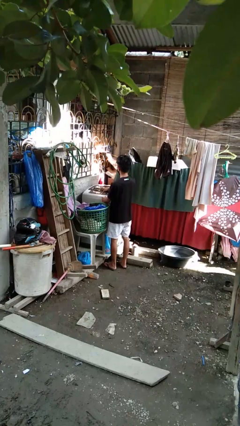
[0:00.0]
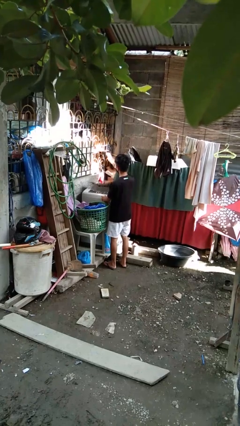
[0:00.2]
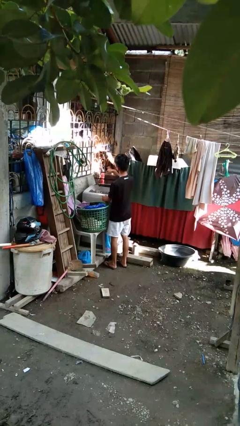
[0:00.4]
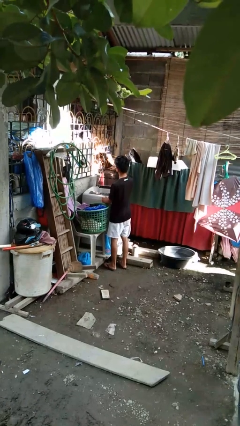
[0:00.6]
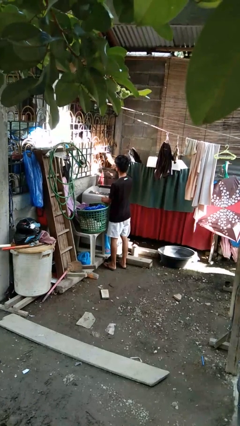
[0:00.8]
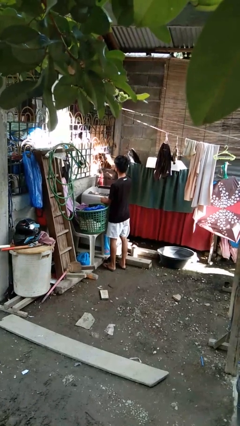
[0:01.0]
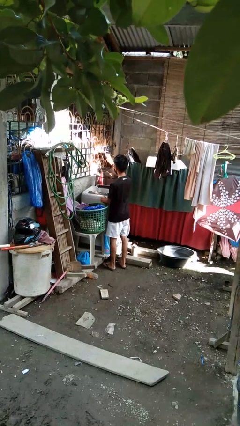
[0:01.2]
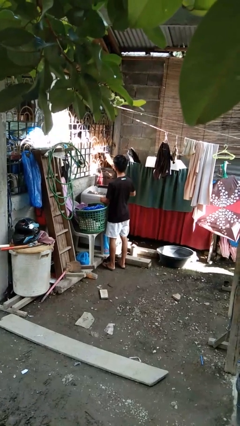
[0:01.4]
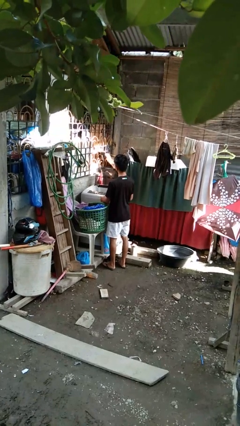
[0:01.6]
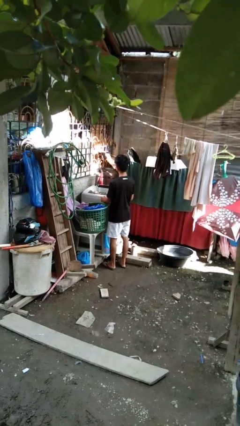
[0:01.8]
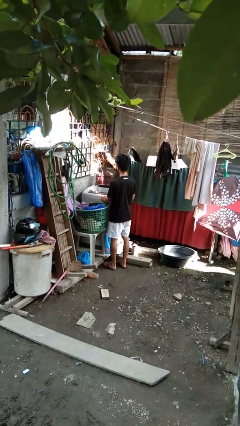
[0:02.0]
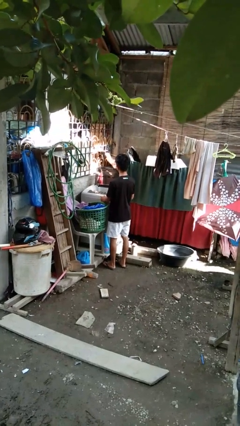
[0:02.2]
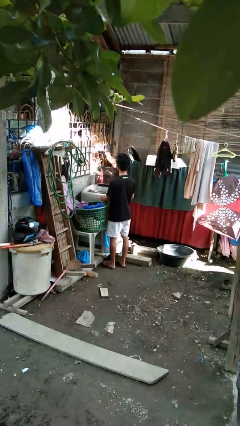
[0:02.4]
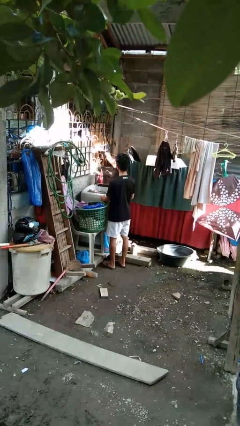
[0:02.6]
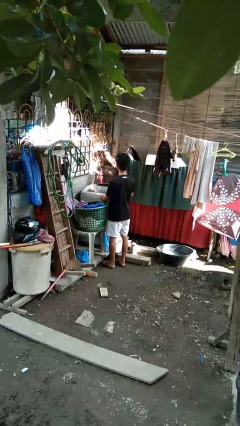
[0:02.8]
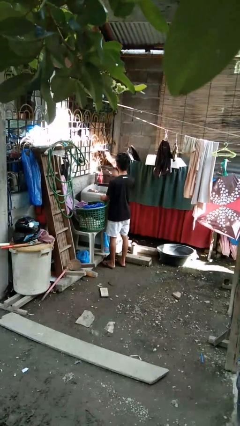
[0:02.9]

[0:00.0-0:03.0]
person opens clothes washer

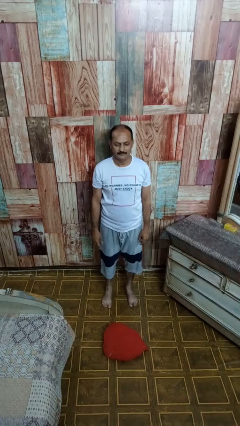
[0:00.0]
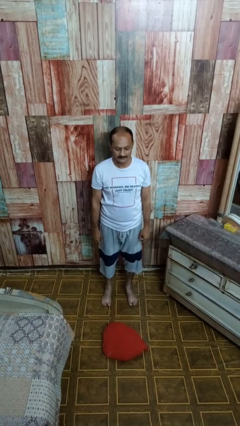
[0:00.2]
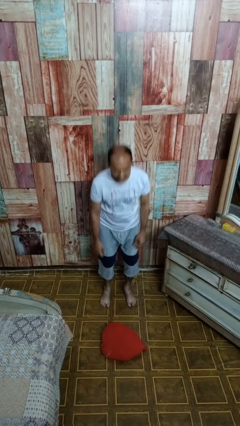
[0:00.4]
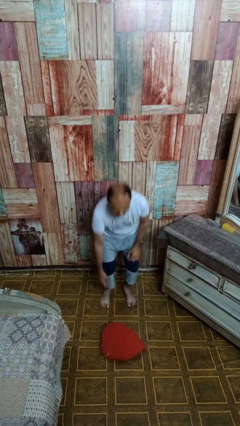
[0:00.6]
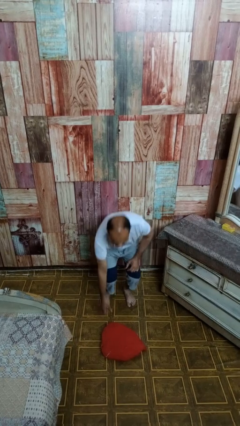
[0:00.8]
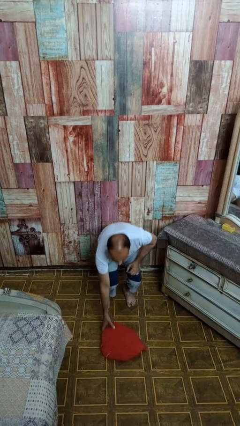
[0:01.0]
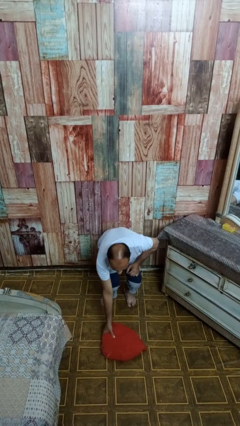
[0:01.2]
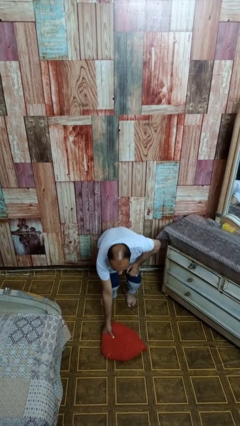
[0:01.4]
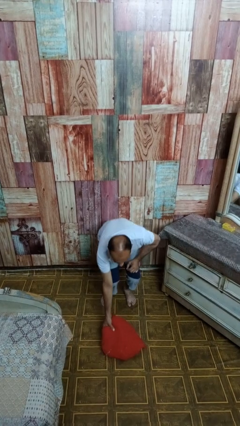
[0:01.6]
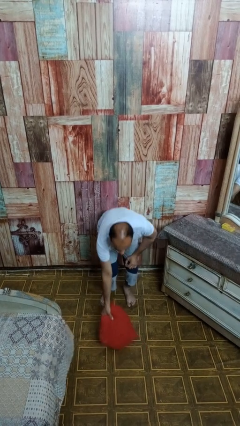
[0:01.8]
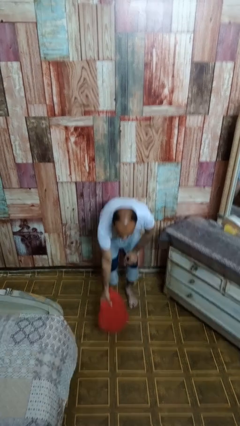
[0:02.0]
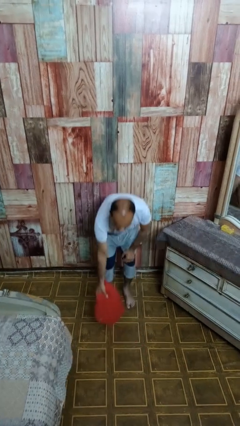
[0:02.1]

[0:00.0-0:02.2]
person picks up object from floor

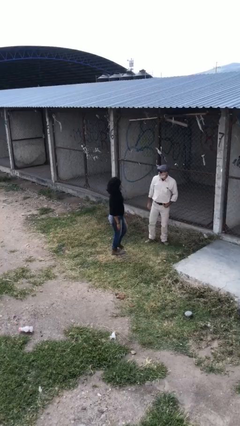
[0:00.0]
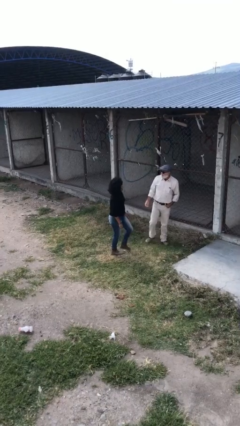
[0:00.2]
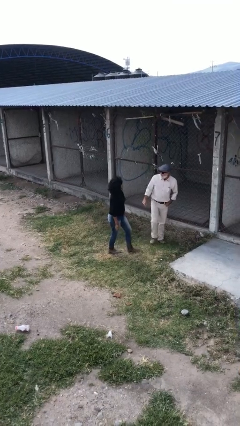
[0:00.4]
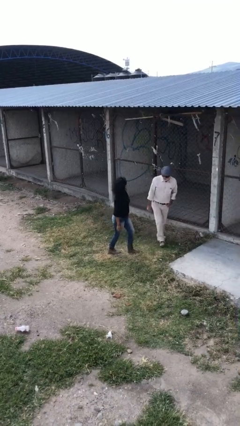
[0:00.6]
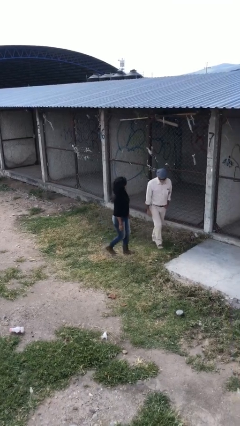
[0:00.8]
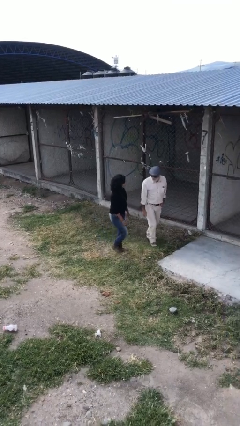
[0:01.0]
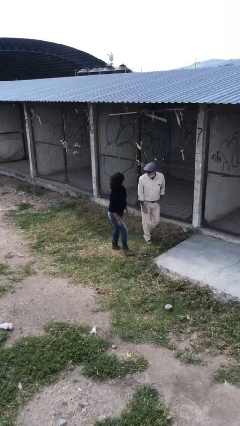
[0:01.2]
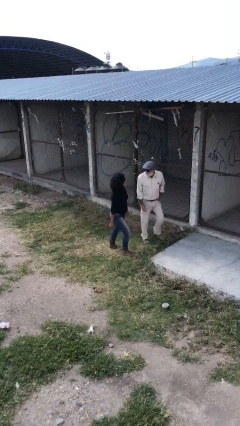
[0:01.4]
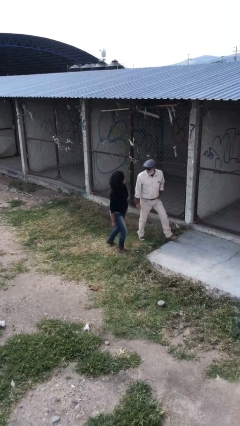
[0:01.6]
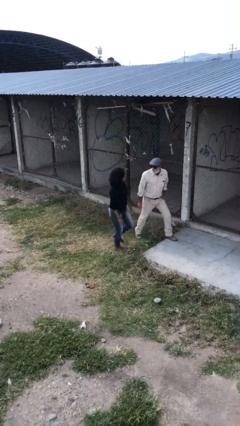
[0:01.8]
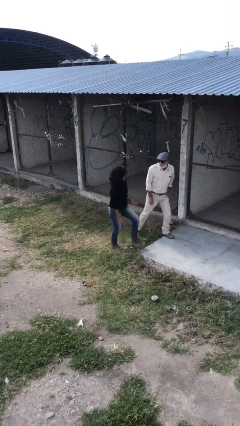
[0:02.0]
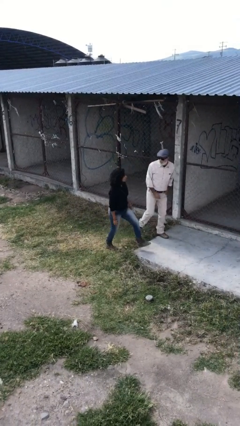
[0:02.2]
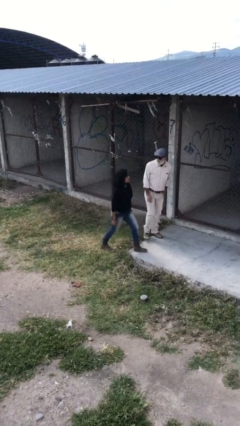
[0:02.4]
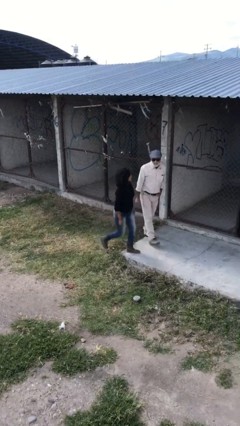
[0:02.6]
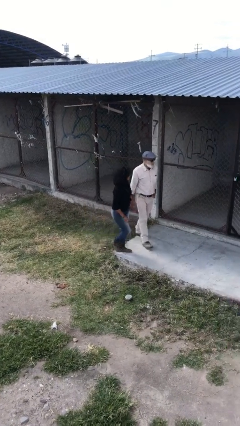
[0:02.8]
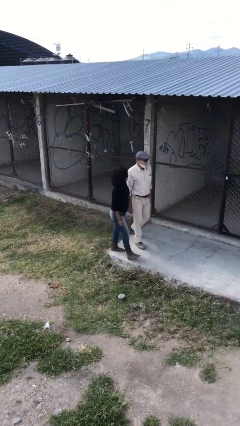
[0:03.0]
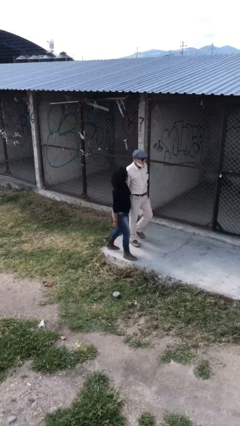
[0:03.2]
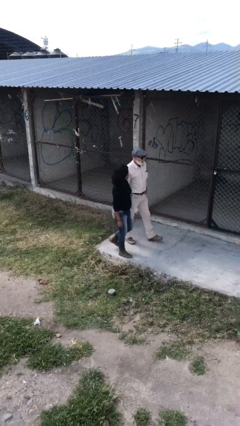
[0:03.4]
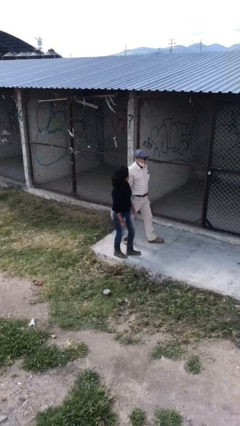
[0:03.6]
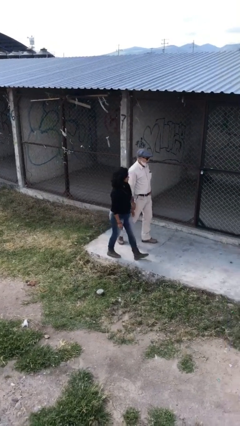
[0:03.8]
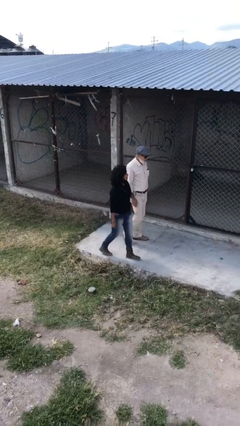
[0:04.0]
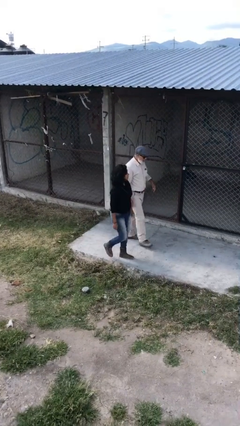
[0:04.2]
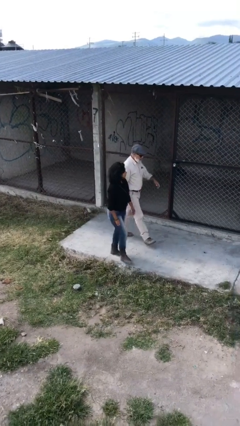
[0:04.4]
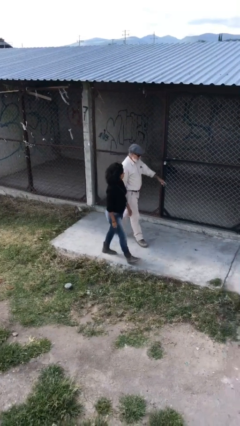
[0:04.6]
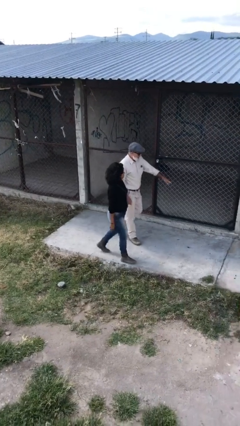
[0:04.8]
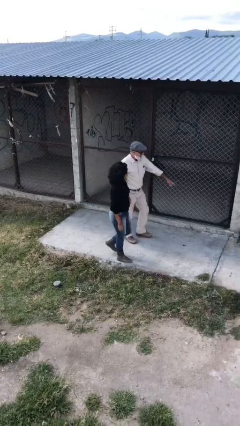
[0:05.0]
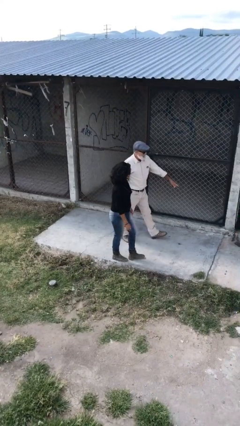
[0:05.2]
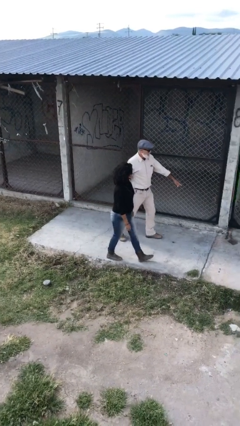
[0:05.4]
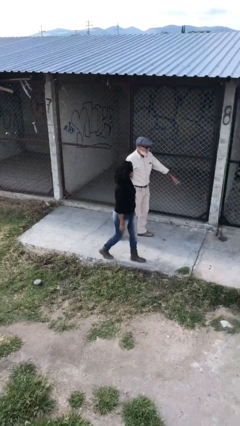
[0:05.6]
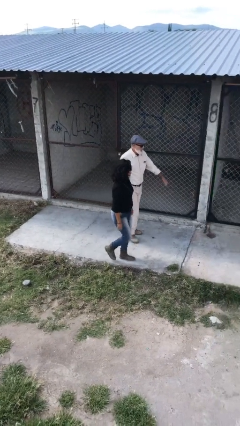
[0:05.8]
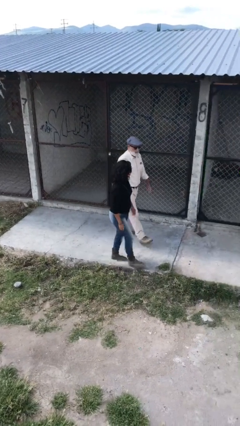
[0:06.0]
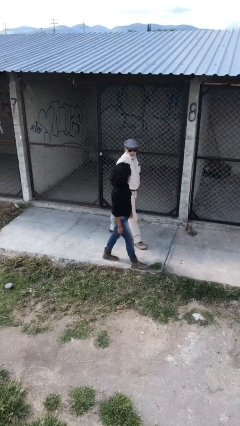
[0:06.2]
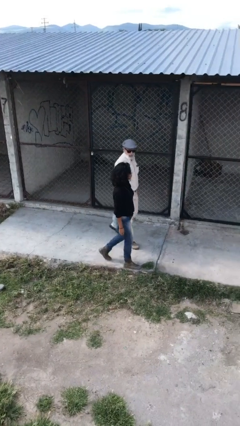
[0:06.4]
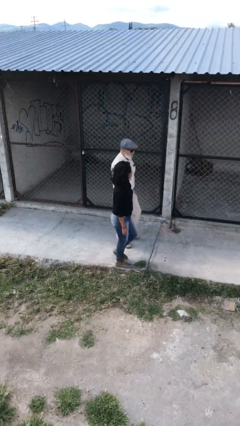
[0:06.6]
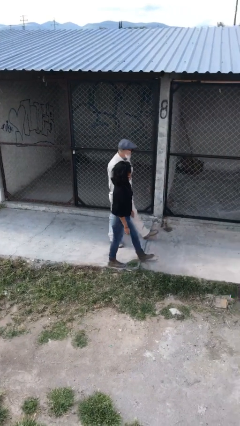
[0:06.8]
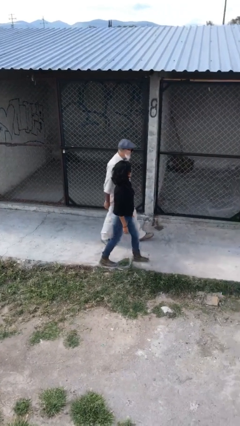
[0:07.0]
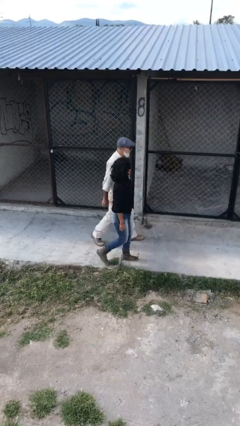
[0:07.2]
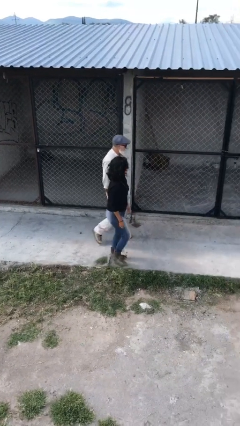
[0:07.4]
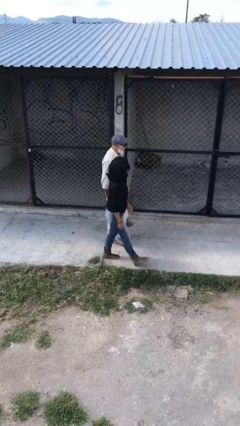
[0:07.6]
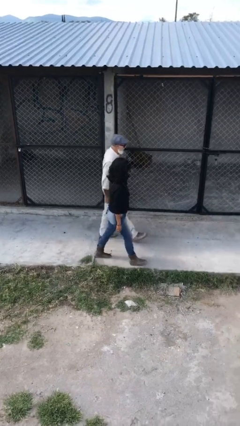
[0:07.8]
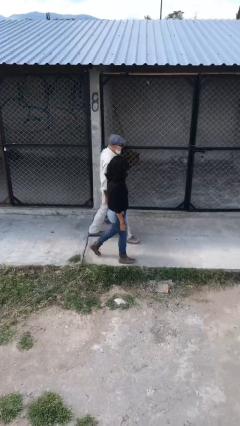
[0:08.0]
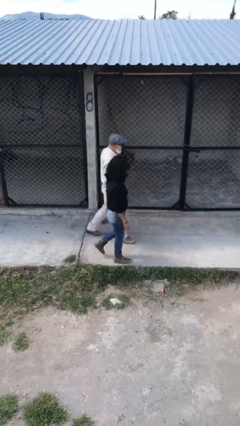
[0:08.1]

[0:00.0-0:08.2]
person talks to person

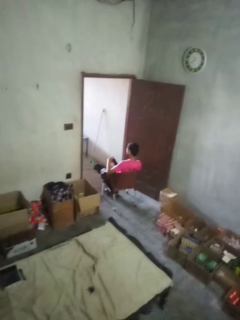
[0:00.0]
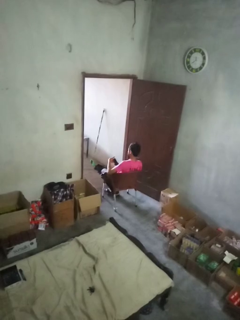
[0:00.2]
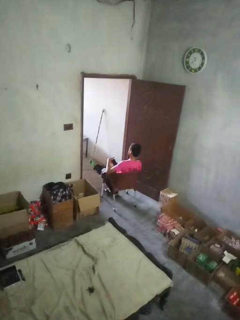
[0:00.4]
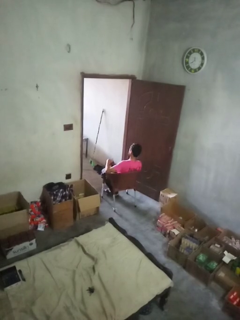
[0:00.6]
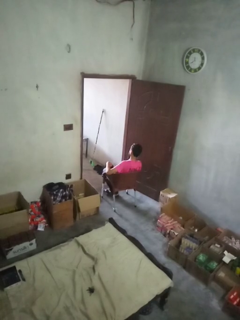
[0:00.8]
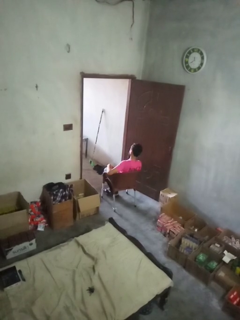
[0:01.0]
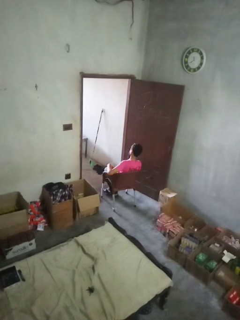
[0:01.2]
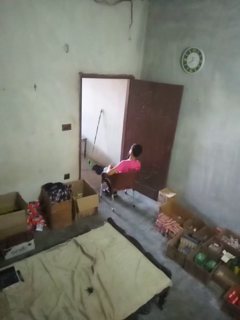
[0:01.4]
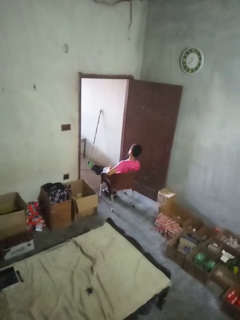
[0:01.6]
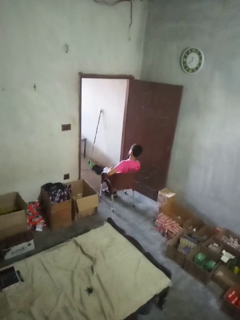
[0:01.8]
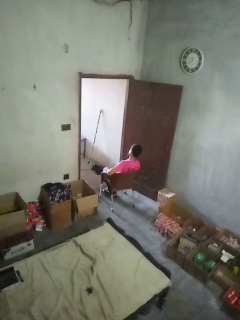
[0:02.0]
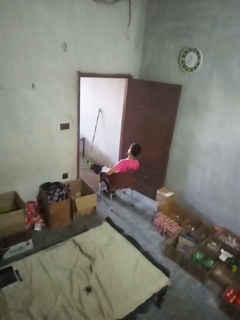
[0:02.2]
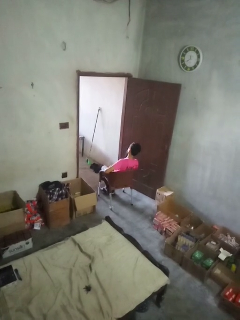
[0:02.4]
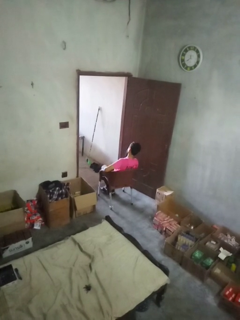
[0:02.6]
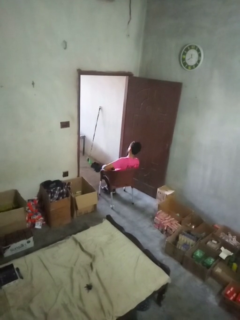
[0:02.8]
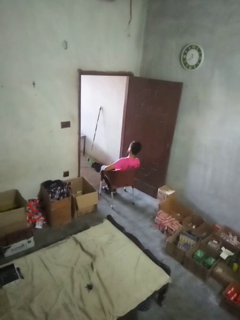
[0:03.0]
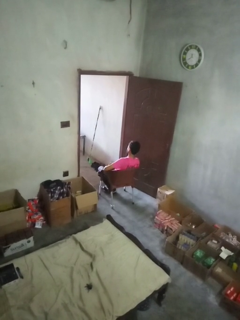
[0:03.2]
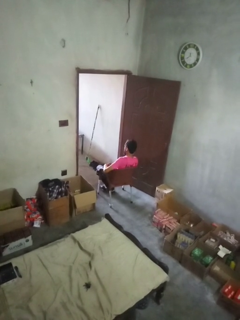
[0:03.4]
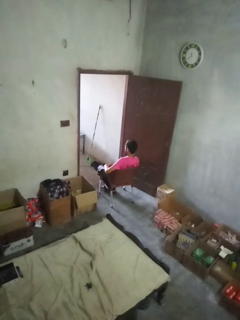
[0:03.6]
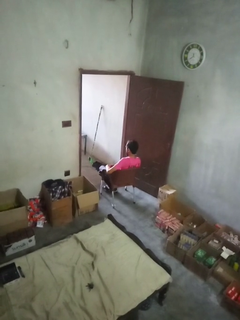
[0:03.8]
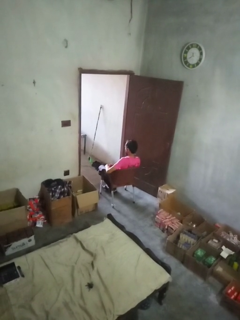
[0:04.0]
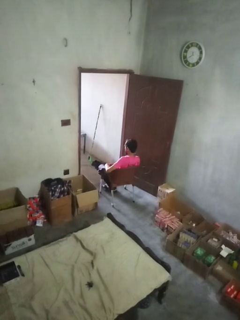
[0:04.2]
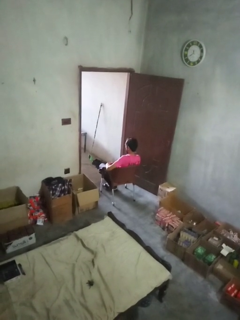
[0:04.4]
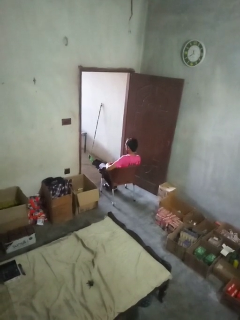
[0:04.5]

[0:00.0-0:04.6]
person puts phone into pocket

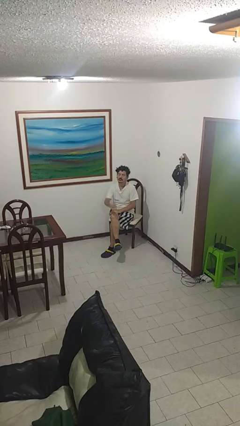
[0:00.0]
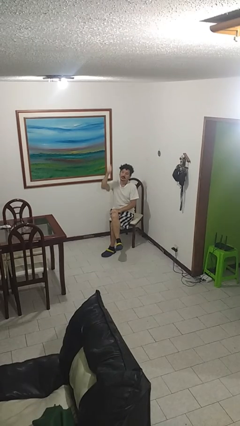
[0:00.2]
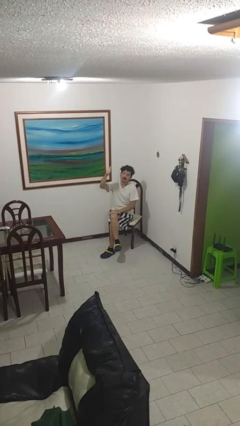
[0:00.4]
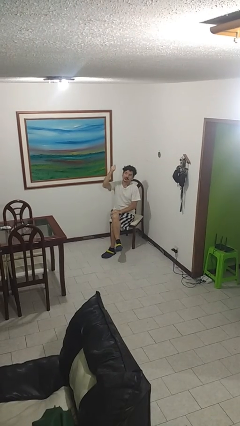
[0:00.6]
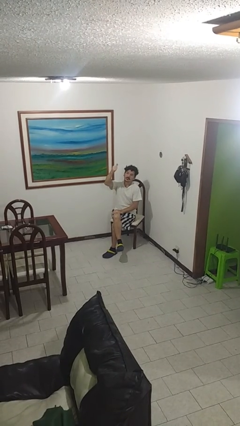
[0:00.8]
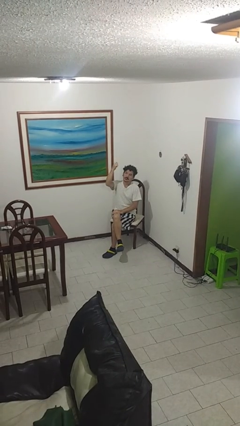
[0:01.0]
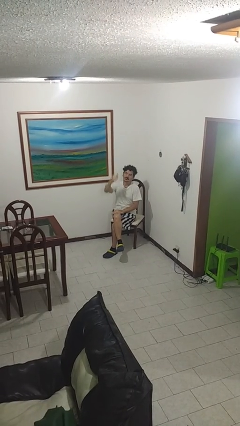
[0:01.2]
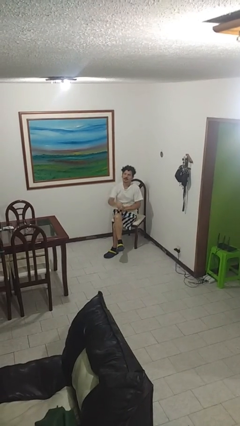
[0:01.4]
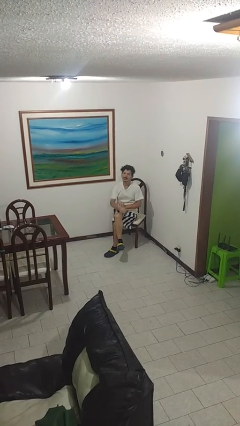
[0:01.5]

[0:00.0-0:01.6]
person gestures behind me
